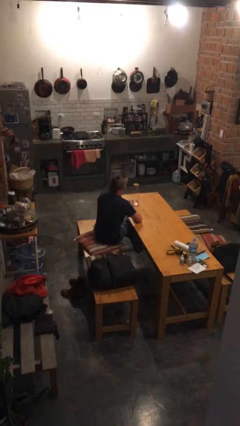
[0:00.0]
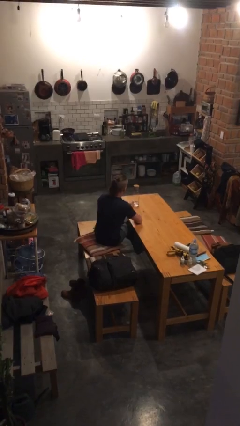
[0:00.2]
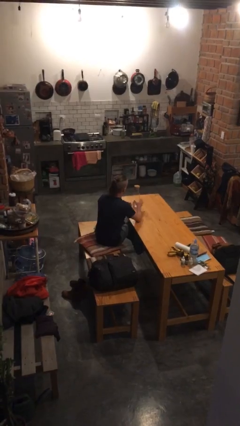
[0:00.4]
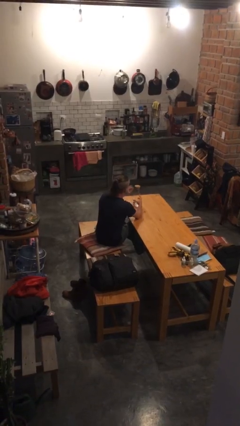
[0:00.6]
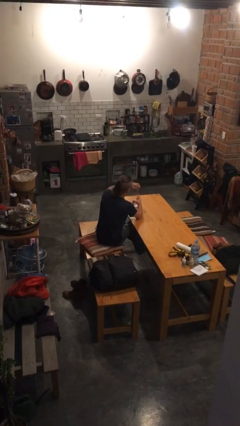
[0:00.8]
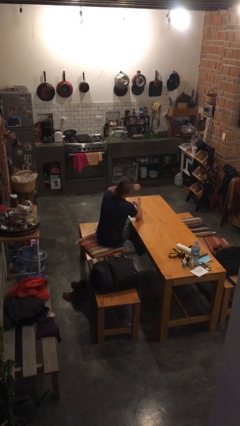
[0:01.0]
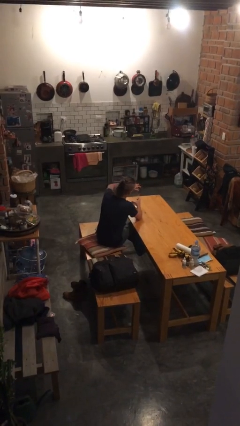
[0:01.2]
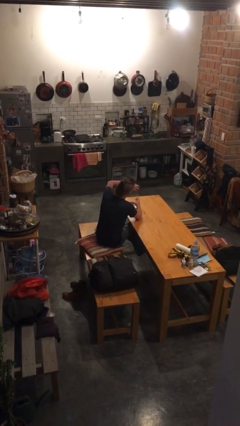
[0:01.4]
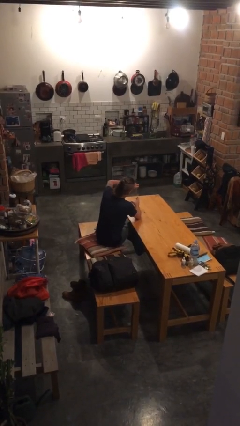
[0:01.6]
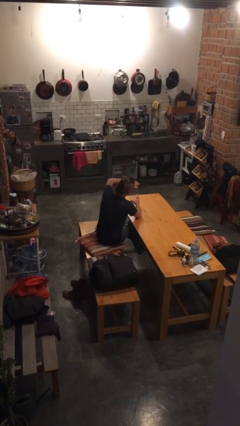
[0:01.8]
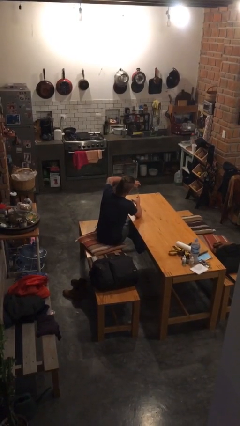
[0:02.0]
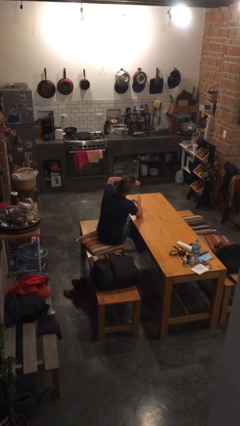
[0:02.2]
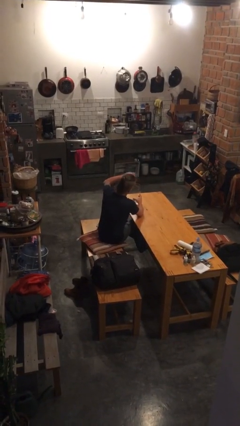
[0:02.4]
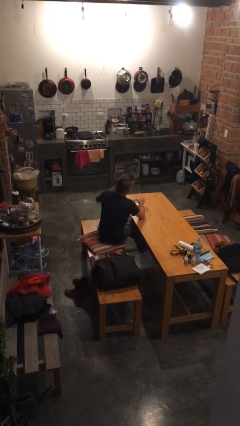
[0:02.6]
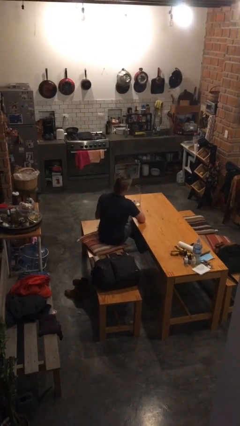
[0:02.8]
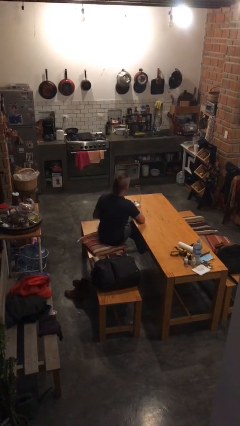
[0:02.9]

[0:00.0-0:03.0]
person opens jar

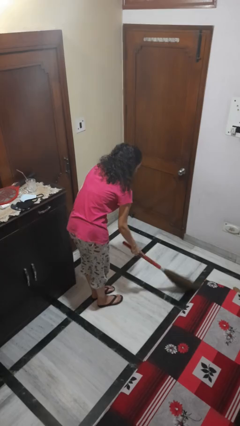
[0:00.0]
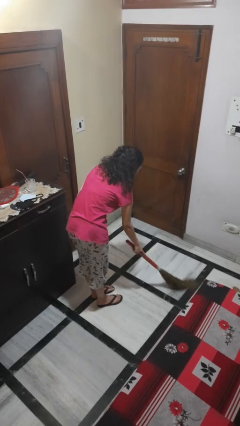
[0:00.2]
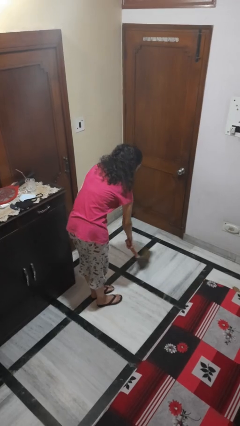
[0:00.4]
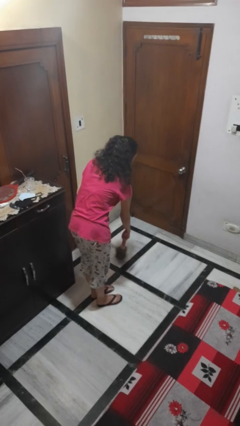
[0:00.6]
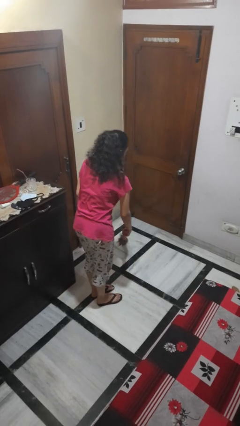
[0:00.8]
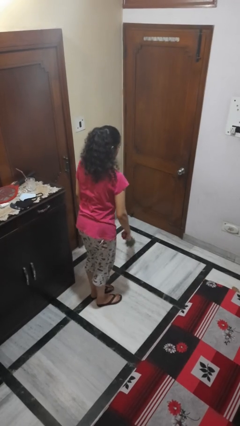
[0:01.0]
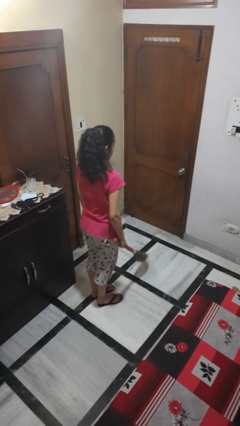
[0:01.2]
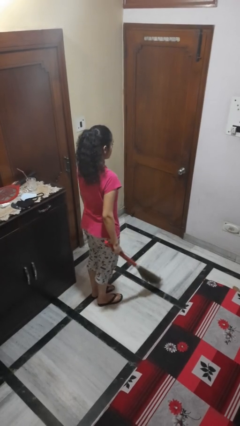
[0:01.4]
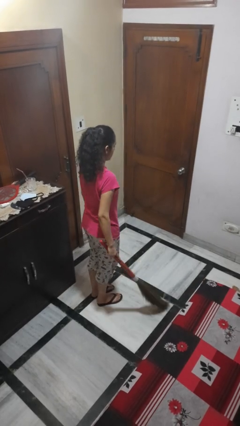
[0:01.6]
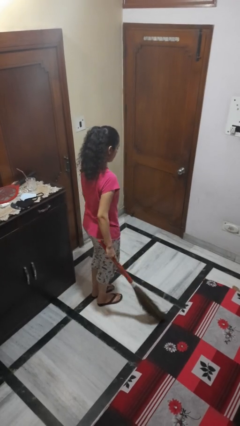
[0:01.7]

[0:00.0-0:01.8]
person sweeps floor

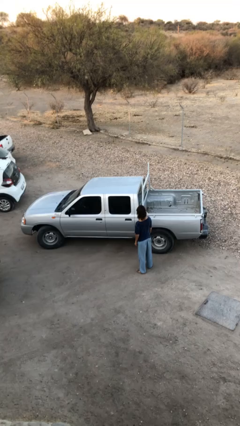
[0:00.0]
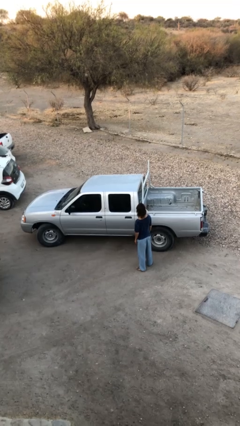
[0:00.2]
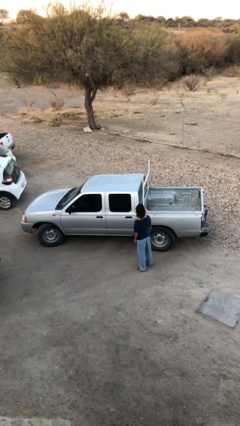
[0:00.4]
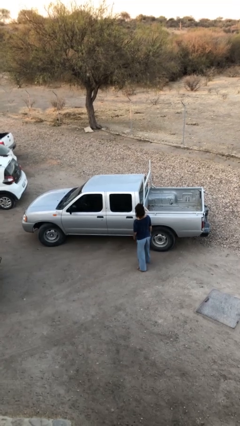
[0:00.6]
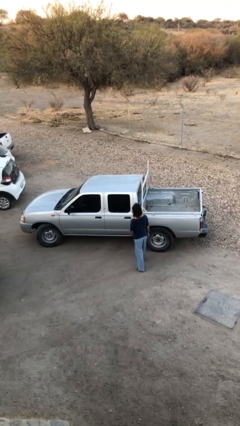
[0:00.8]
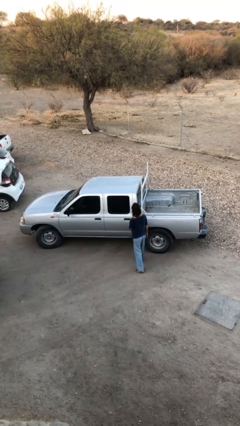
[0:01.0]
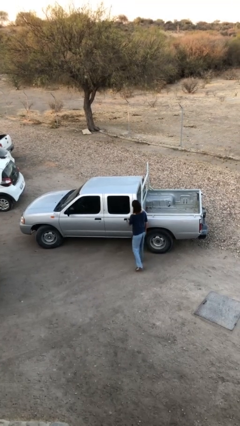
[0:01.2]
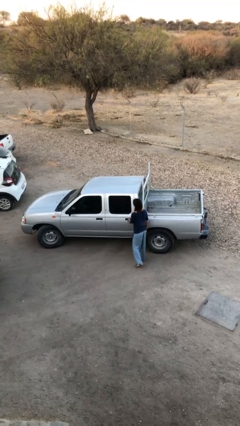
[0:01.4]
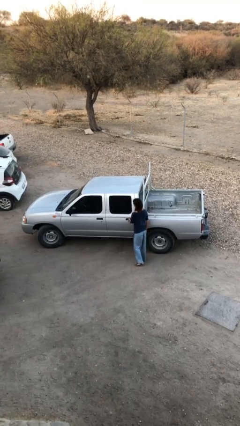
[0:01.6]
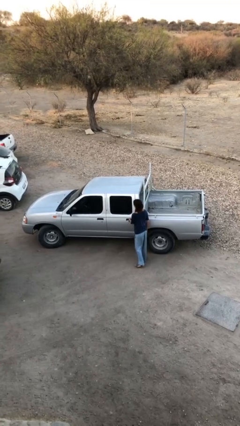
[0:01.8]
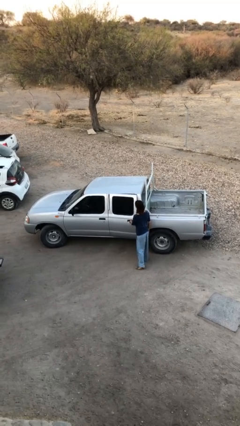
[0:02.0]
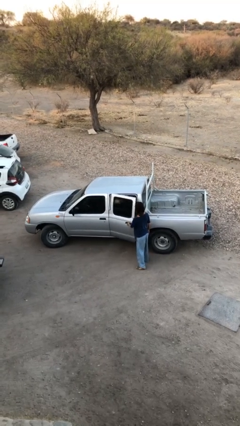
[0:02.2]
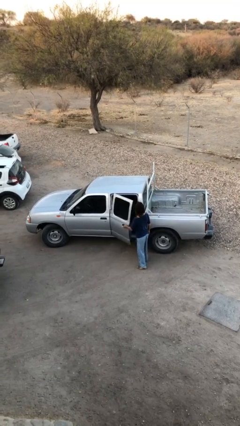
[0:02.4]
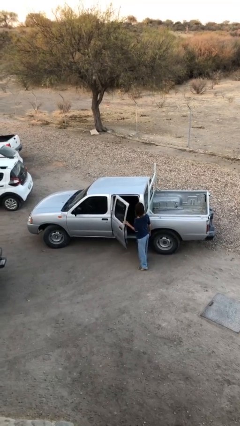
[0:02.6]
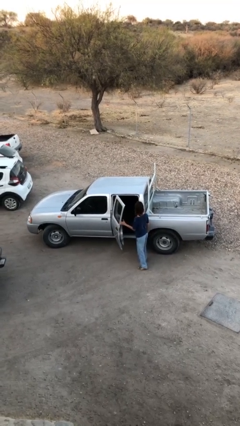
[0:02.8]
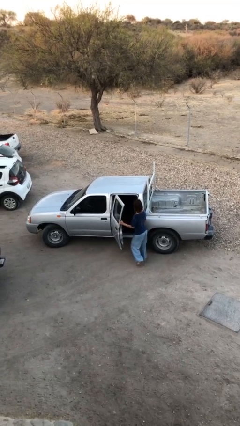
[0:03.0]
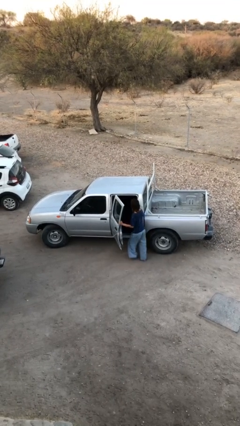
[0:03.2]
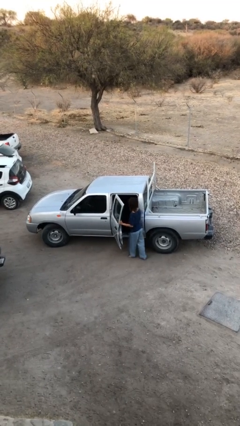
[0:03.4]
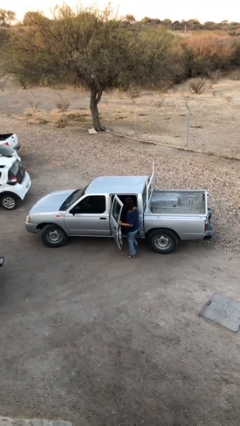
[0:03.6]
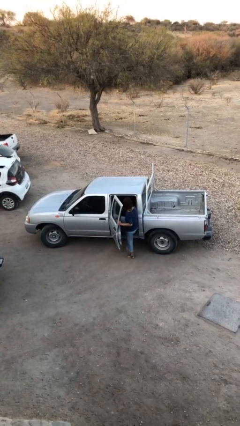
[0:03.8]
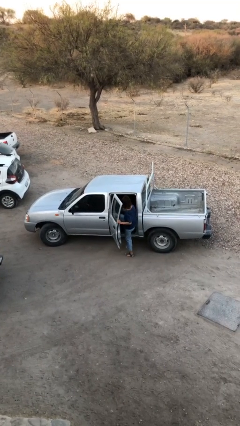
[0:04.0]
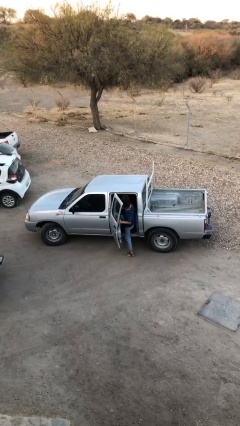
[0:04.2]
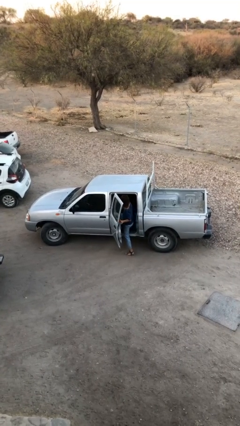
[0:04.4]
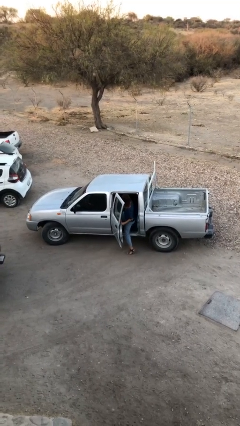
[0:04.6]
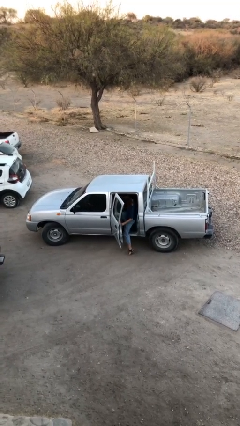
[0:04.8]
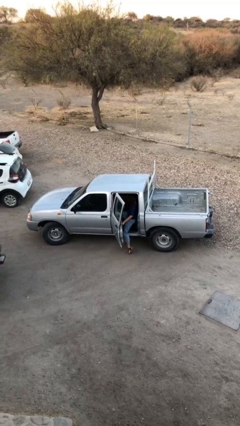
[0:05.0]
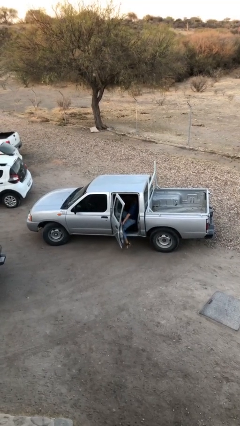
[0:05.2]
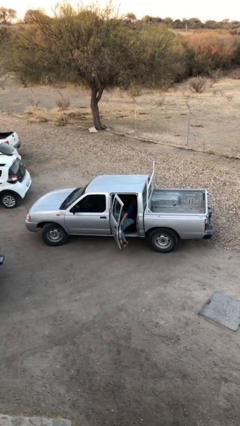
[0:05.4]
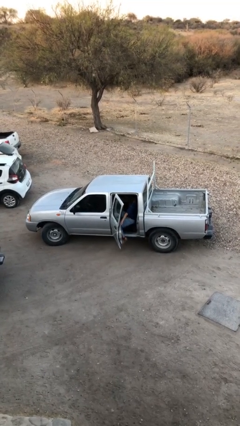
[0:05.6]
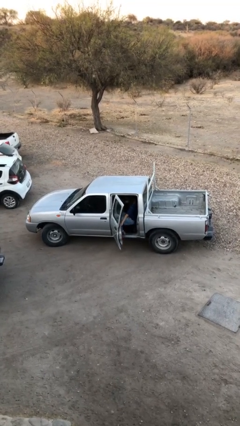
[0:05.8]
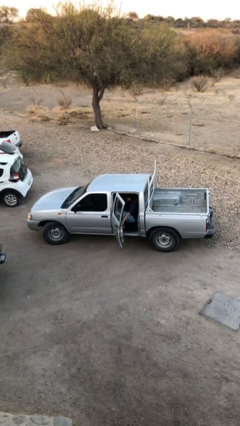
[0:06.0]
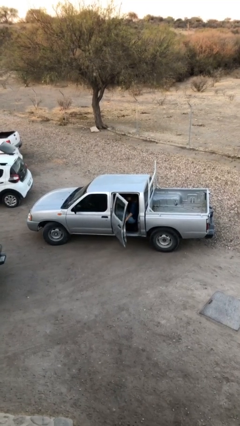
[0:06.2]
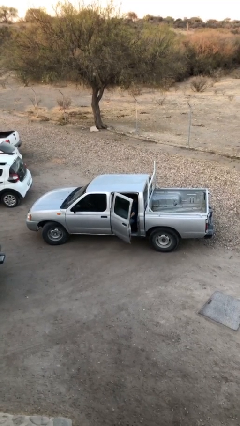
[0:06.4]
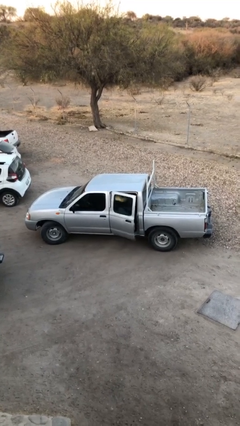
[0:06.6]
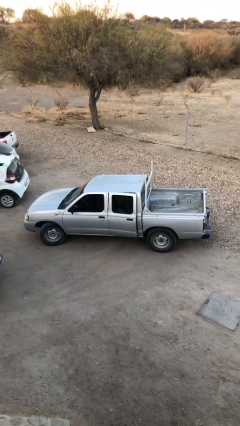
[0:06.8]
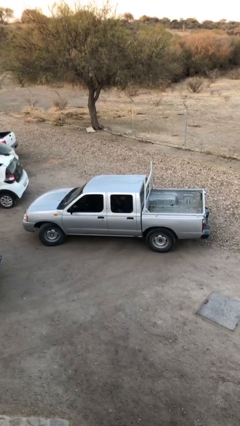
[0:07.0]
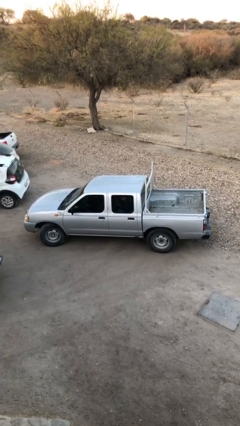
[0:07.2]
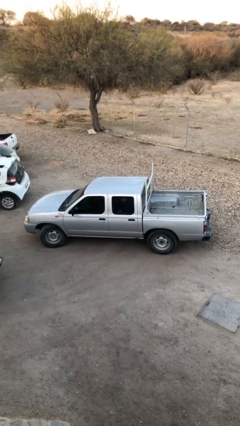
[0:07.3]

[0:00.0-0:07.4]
car picks up person

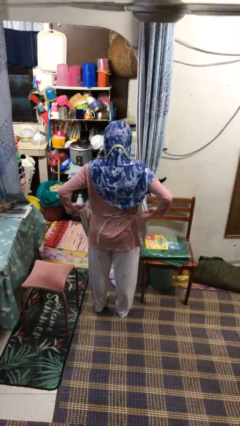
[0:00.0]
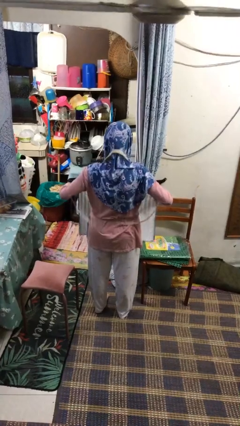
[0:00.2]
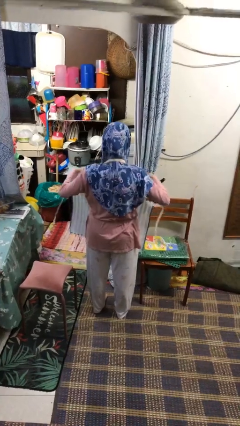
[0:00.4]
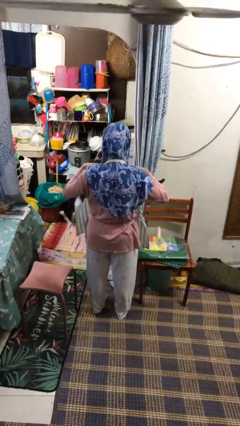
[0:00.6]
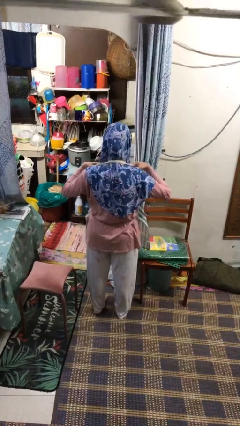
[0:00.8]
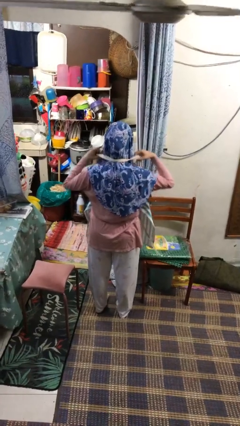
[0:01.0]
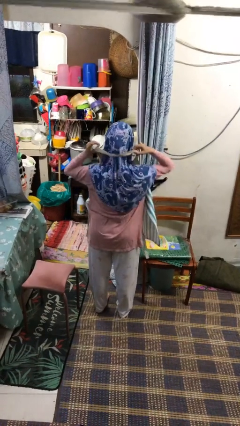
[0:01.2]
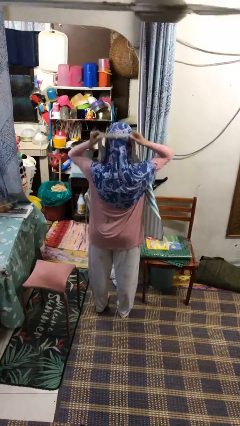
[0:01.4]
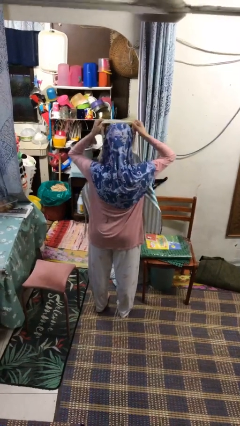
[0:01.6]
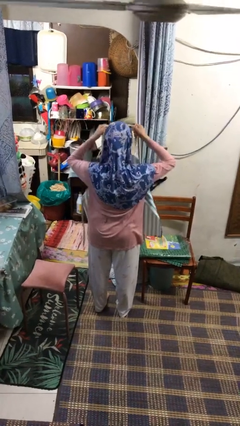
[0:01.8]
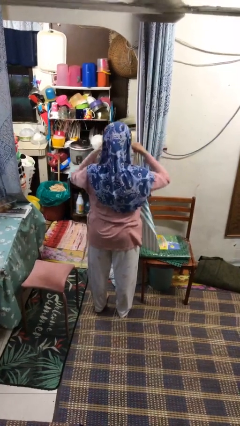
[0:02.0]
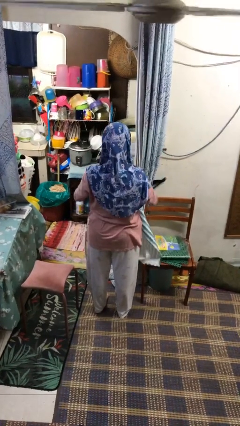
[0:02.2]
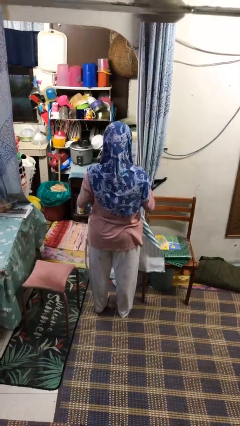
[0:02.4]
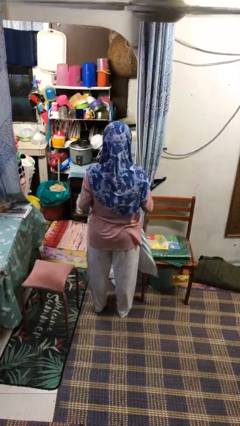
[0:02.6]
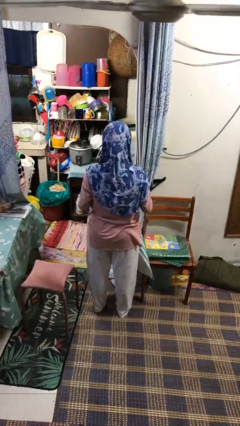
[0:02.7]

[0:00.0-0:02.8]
person takes off apron

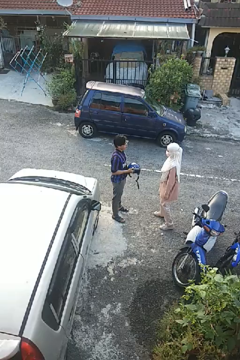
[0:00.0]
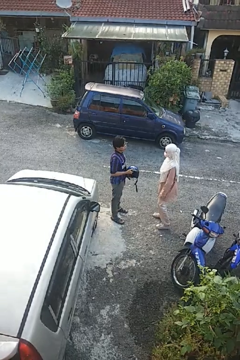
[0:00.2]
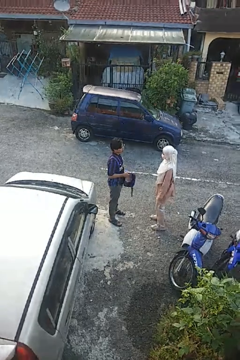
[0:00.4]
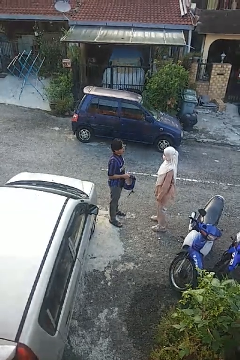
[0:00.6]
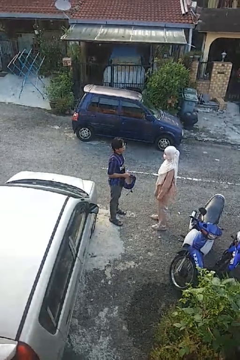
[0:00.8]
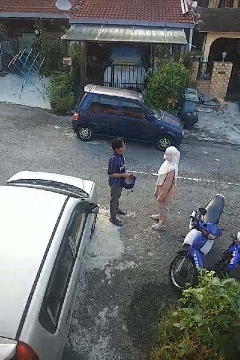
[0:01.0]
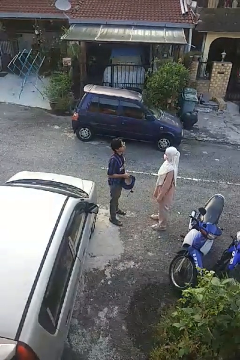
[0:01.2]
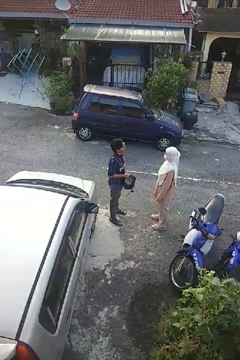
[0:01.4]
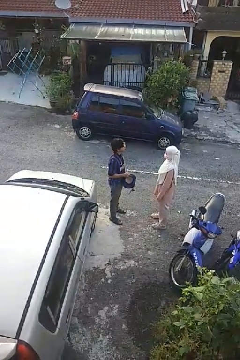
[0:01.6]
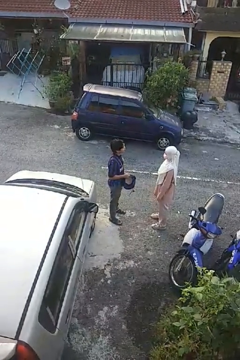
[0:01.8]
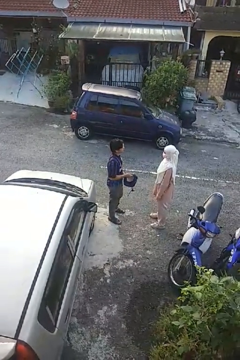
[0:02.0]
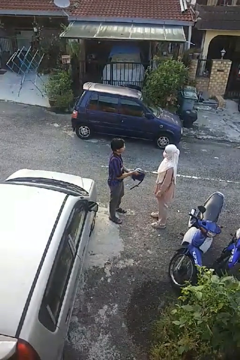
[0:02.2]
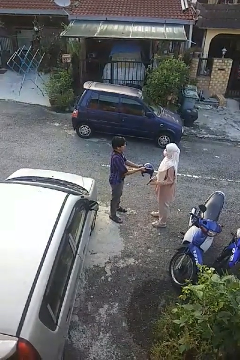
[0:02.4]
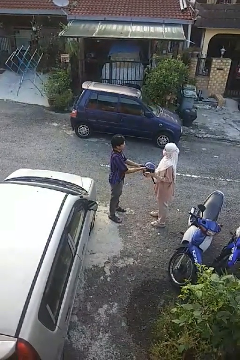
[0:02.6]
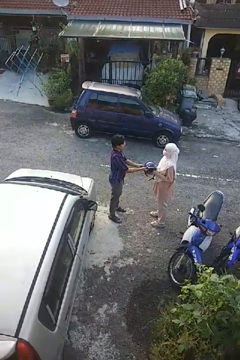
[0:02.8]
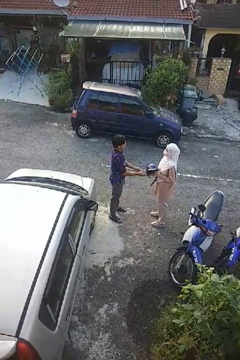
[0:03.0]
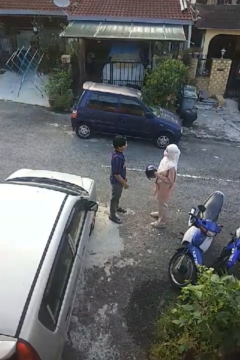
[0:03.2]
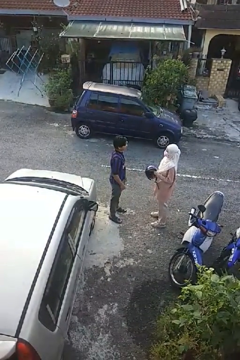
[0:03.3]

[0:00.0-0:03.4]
person transfers object to person
